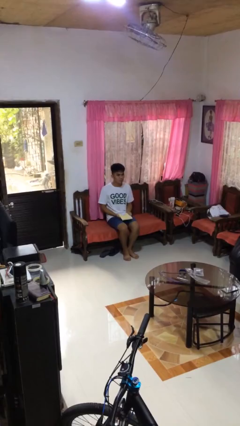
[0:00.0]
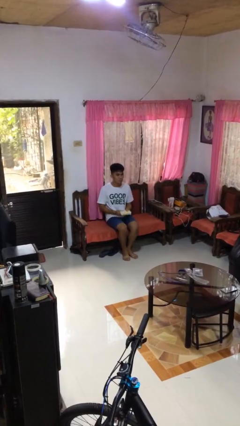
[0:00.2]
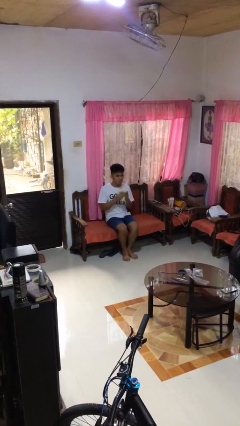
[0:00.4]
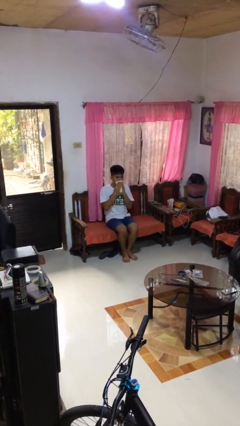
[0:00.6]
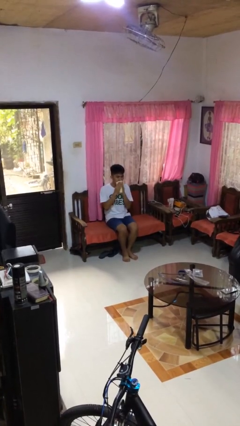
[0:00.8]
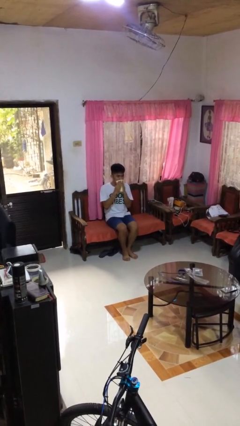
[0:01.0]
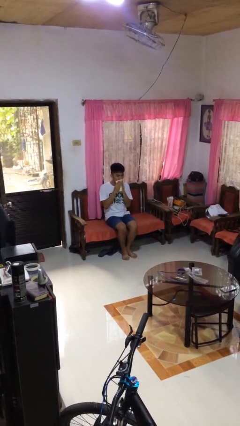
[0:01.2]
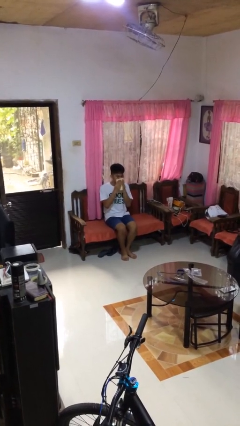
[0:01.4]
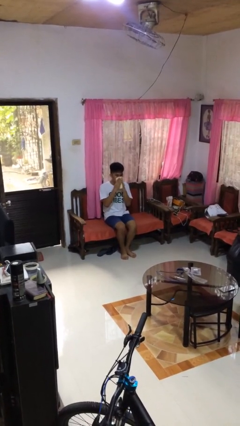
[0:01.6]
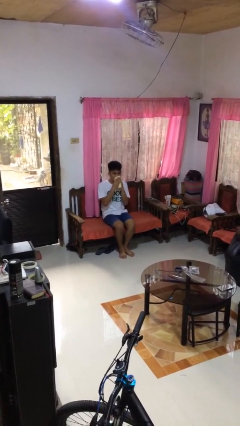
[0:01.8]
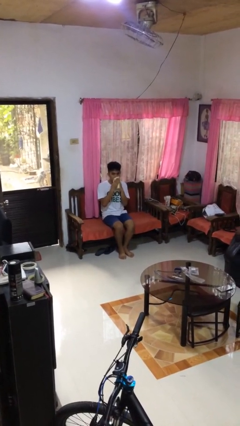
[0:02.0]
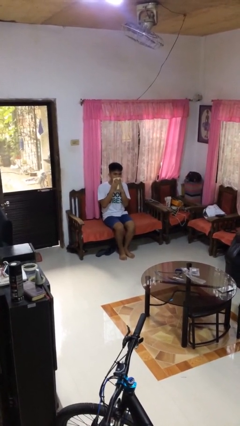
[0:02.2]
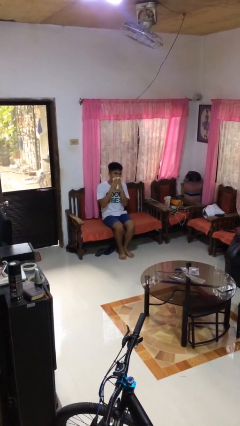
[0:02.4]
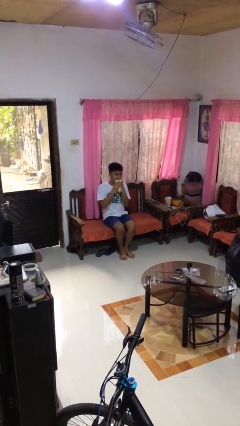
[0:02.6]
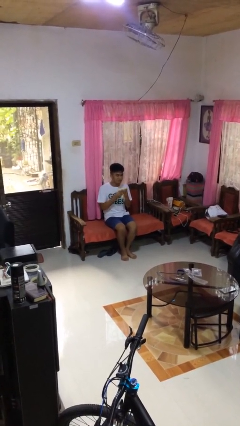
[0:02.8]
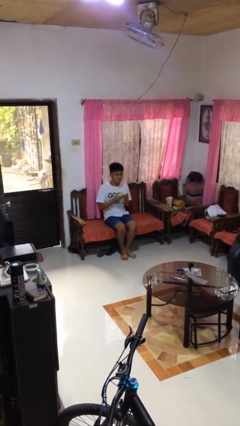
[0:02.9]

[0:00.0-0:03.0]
person wipes mouth with napkin

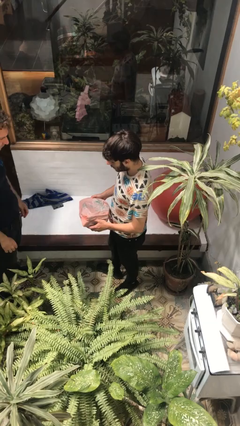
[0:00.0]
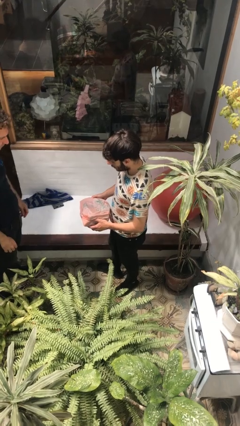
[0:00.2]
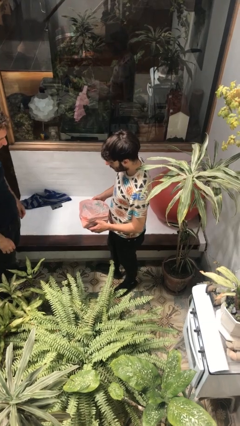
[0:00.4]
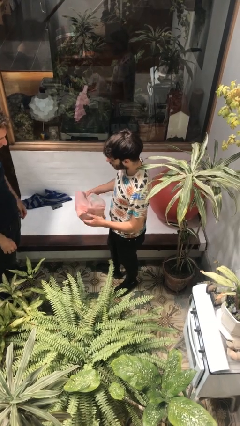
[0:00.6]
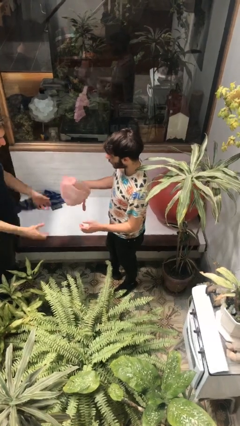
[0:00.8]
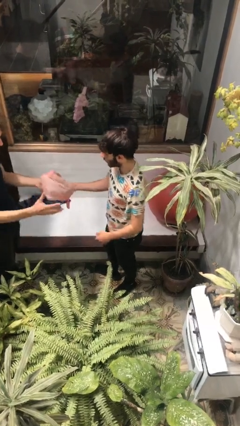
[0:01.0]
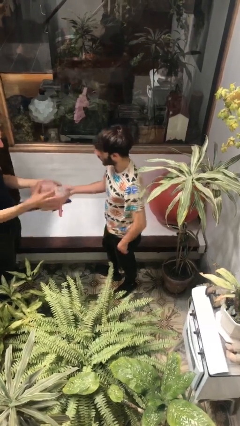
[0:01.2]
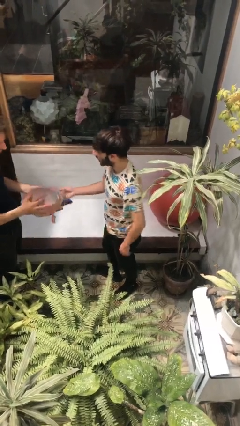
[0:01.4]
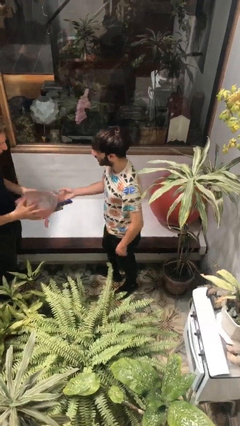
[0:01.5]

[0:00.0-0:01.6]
person transfers object to person

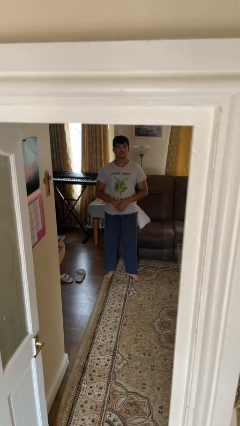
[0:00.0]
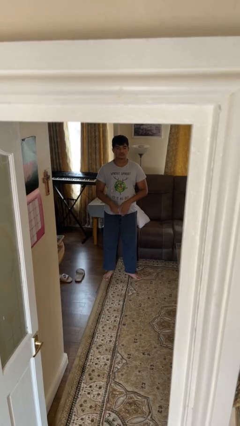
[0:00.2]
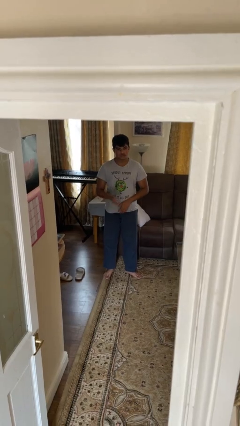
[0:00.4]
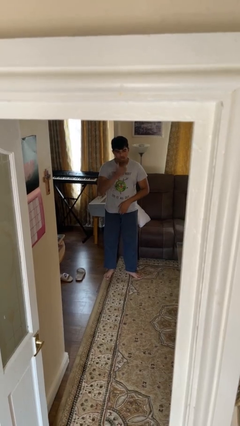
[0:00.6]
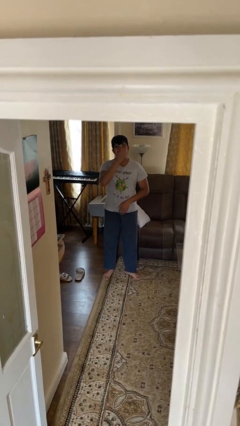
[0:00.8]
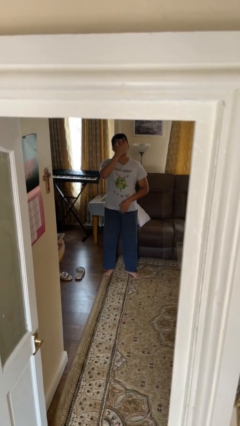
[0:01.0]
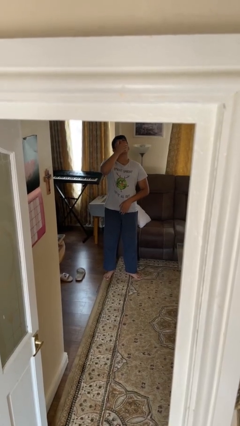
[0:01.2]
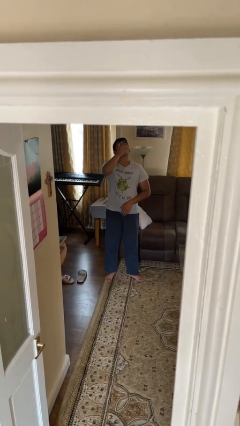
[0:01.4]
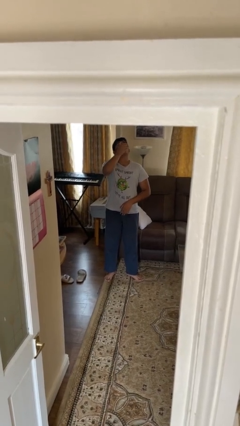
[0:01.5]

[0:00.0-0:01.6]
person yawns

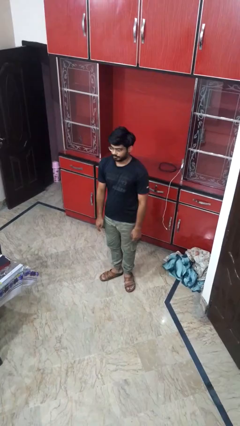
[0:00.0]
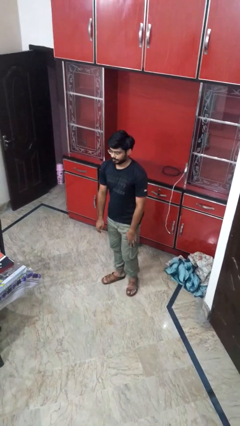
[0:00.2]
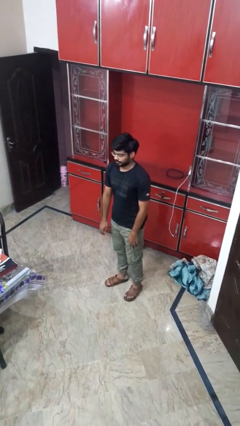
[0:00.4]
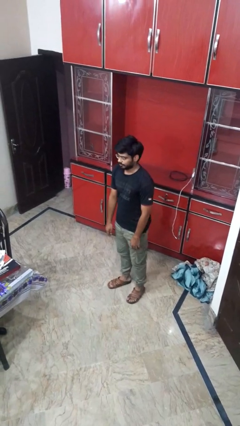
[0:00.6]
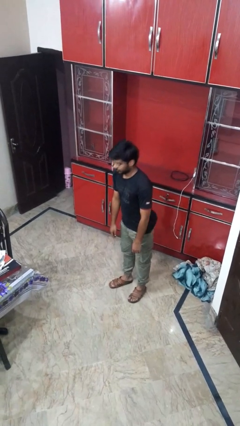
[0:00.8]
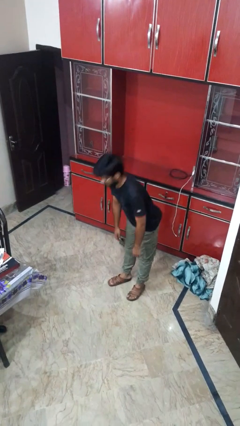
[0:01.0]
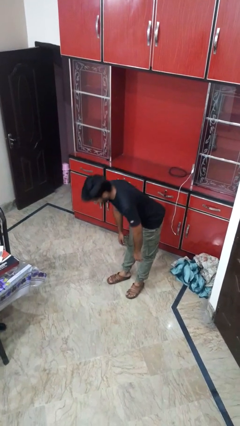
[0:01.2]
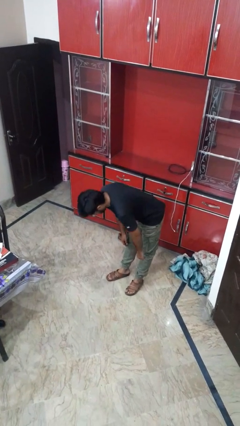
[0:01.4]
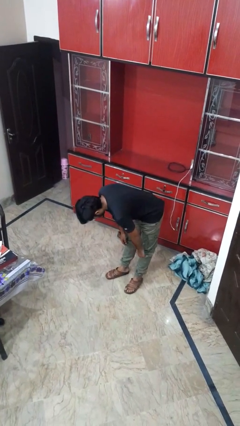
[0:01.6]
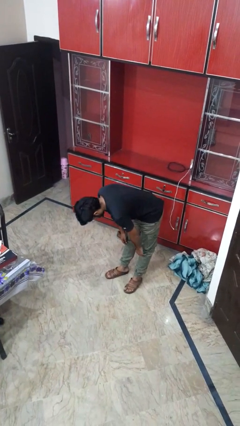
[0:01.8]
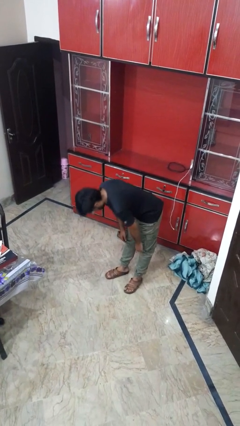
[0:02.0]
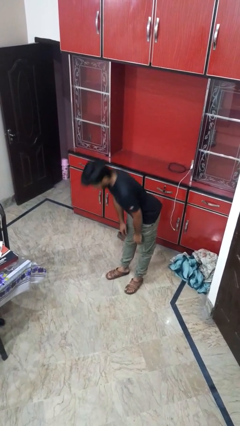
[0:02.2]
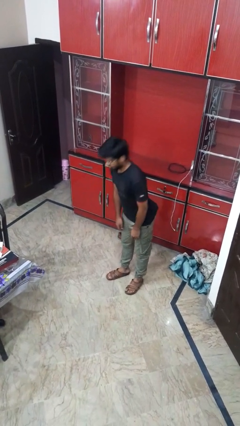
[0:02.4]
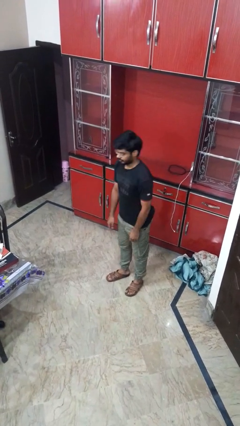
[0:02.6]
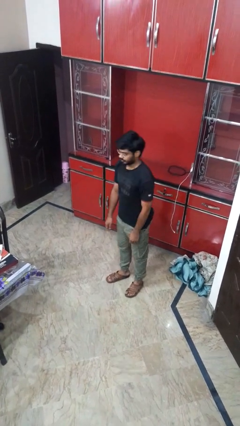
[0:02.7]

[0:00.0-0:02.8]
person bows

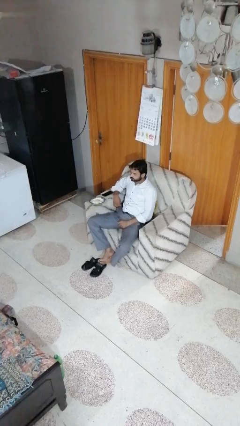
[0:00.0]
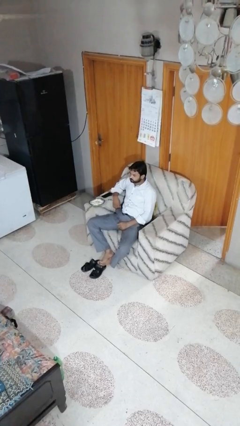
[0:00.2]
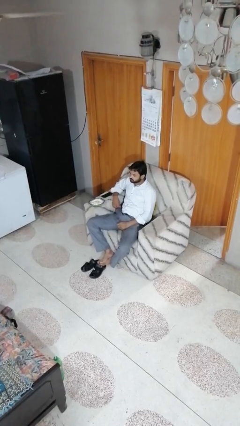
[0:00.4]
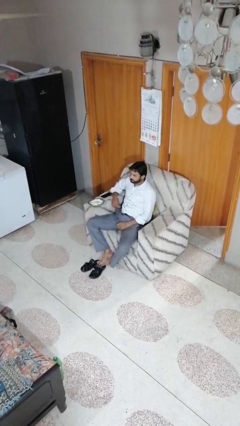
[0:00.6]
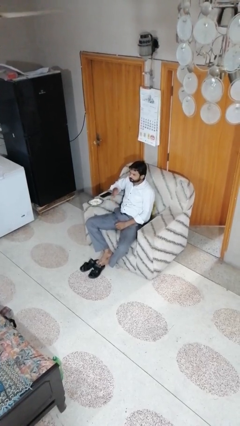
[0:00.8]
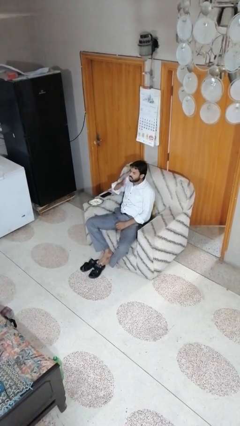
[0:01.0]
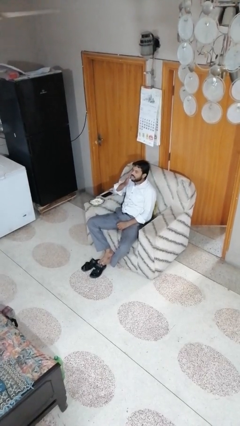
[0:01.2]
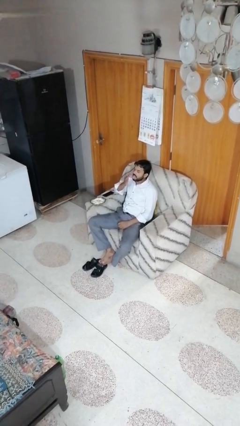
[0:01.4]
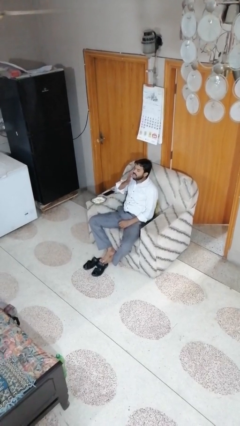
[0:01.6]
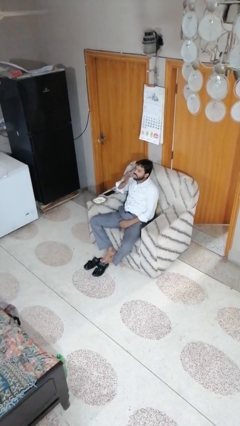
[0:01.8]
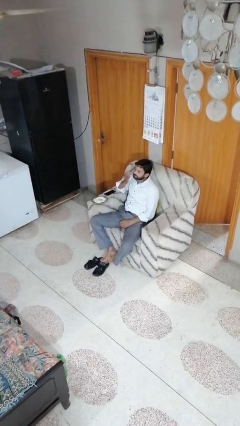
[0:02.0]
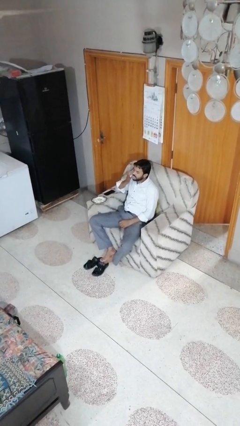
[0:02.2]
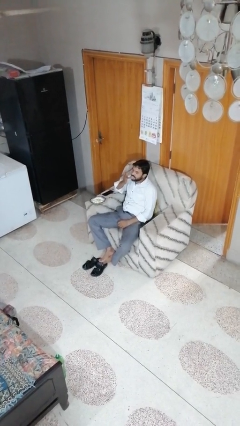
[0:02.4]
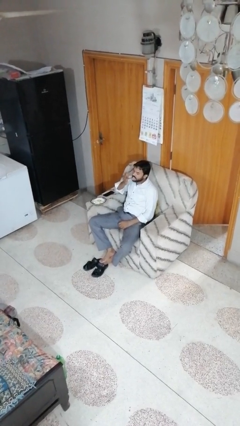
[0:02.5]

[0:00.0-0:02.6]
person licks fingers

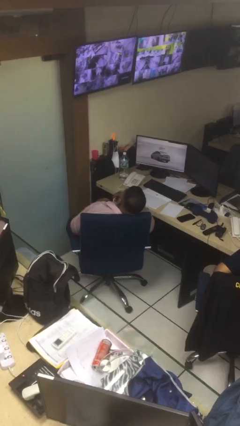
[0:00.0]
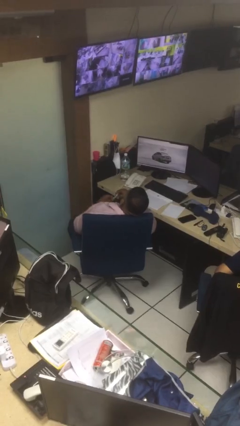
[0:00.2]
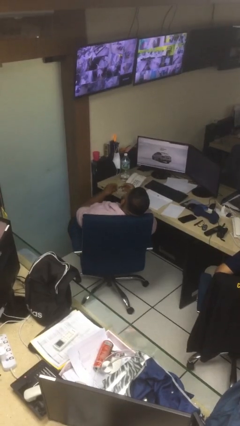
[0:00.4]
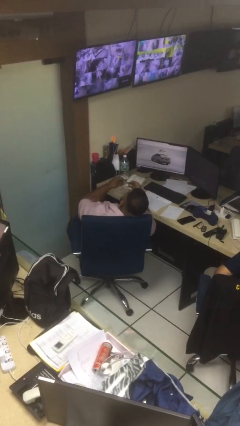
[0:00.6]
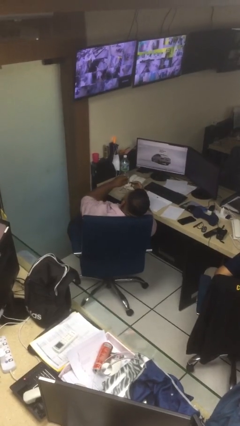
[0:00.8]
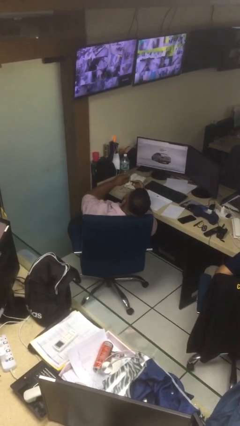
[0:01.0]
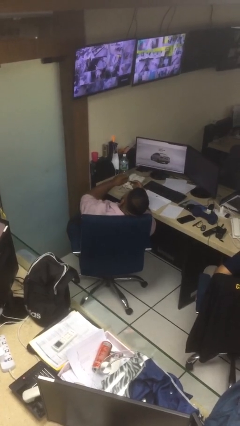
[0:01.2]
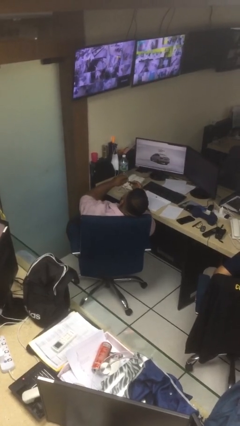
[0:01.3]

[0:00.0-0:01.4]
person clips fingernails

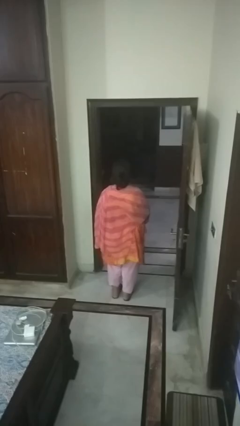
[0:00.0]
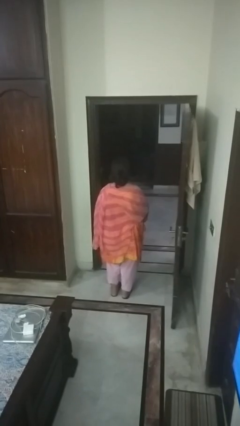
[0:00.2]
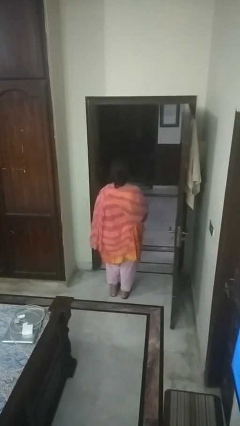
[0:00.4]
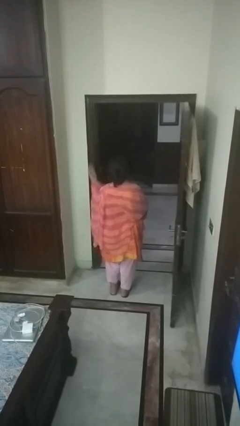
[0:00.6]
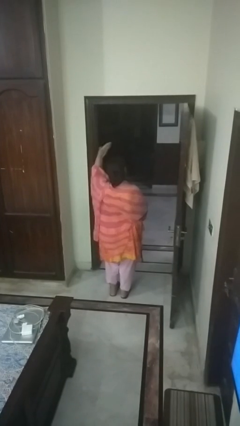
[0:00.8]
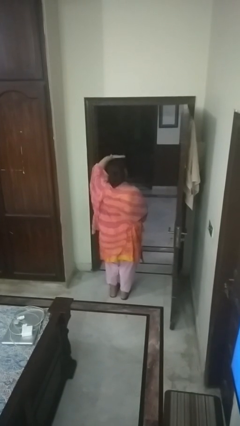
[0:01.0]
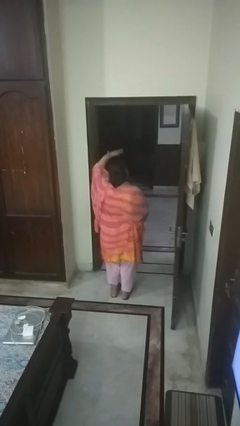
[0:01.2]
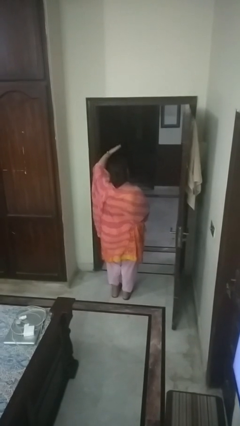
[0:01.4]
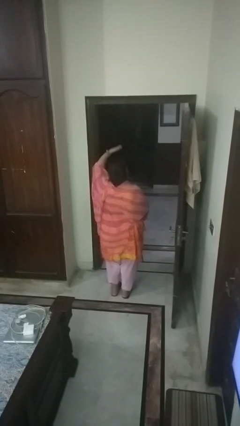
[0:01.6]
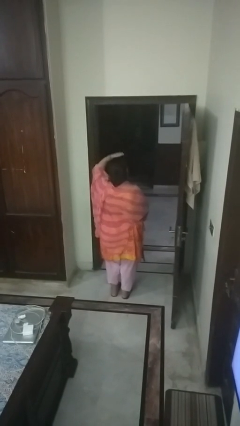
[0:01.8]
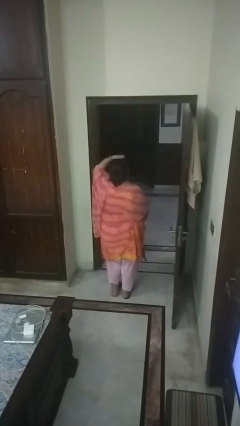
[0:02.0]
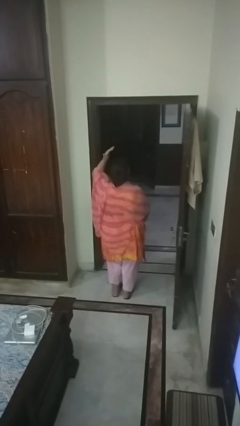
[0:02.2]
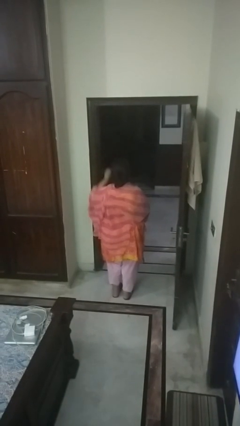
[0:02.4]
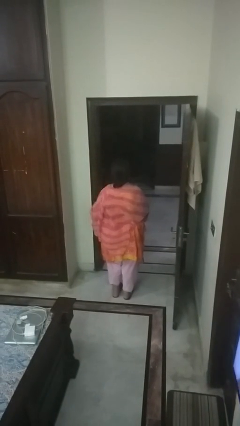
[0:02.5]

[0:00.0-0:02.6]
person pats head

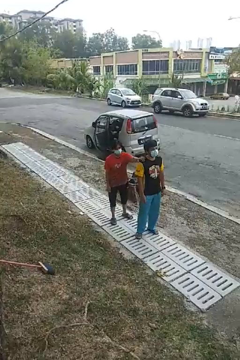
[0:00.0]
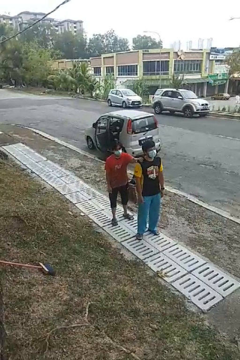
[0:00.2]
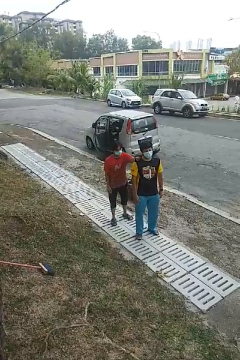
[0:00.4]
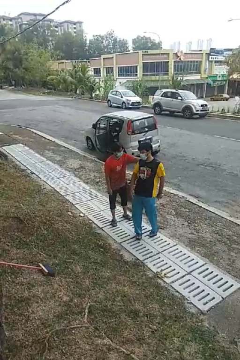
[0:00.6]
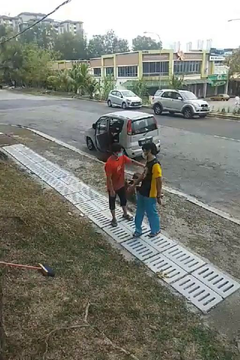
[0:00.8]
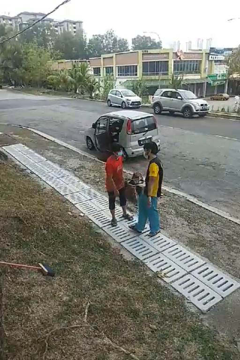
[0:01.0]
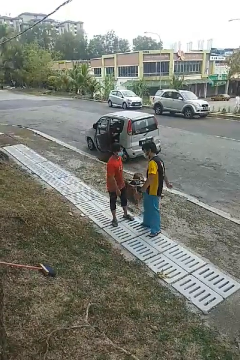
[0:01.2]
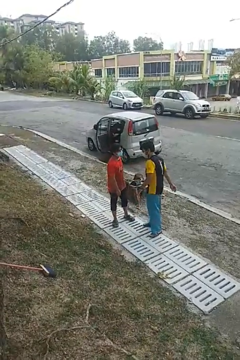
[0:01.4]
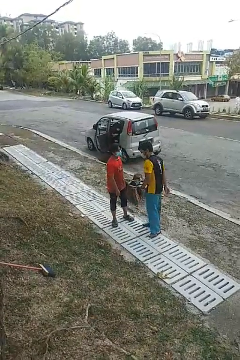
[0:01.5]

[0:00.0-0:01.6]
person spins person around
